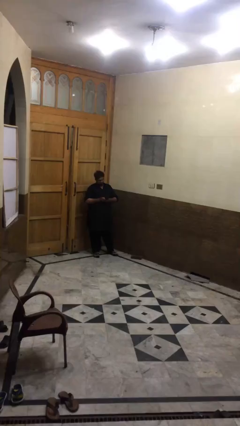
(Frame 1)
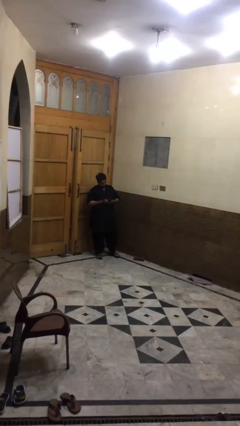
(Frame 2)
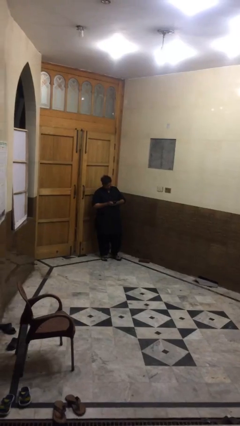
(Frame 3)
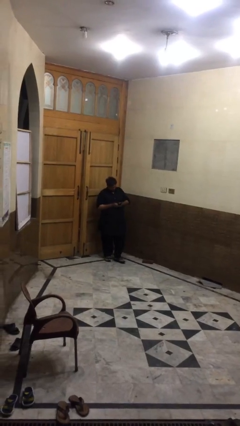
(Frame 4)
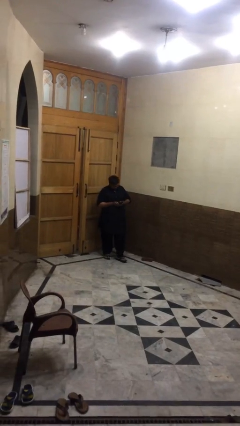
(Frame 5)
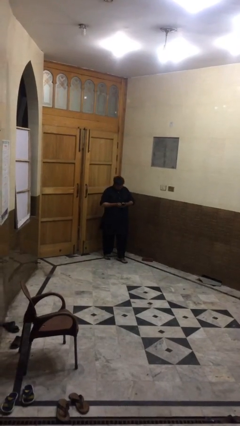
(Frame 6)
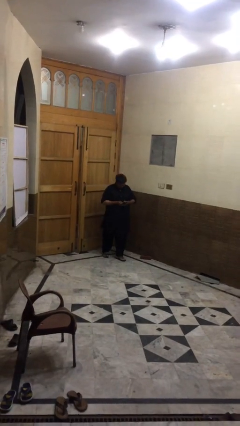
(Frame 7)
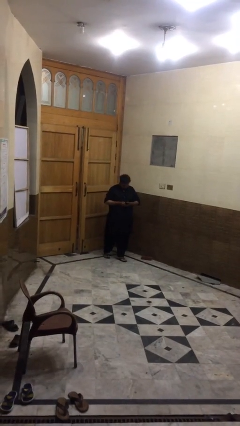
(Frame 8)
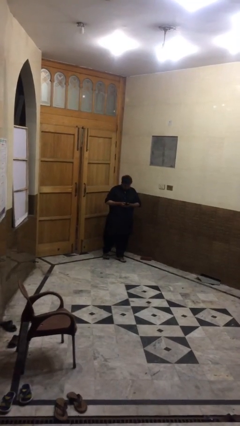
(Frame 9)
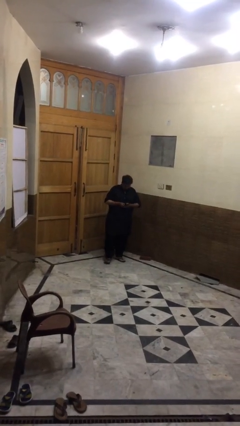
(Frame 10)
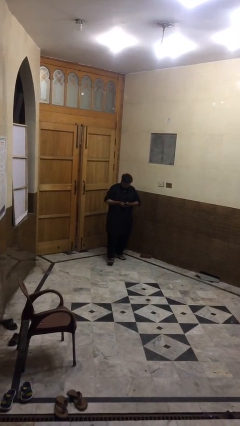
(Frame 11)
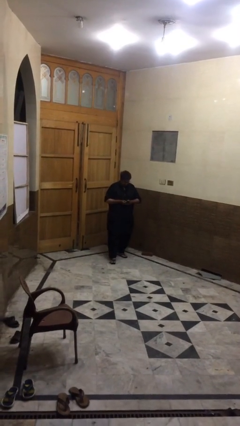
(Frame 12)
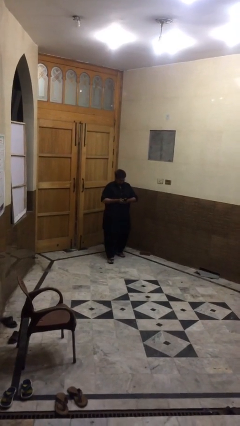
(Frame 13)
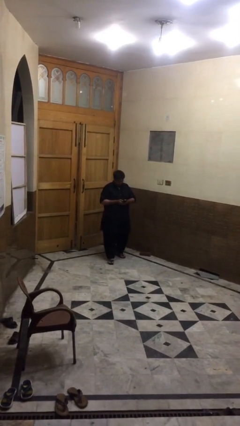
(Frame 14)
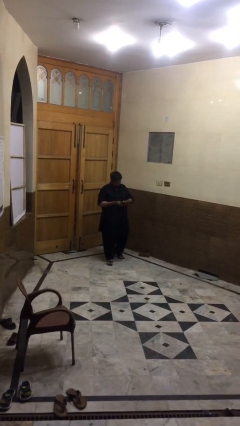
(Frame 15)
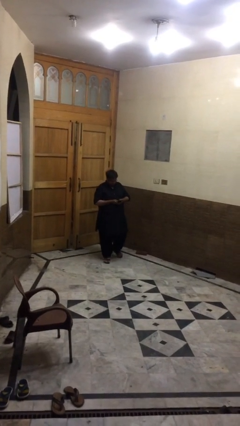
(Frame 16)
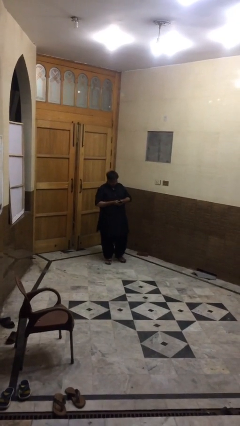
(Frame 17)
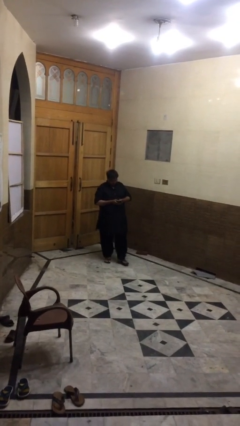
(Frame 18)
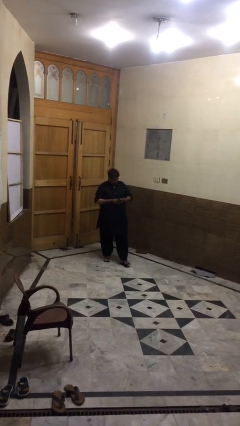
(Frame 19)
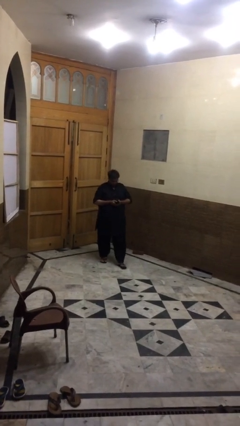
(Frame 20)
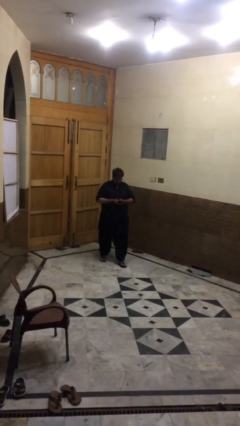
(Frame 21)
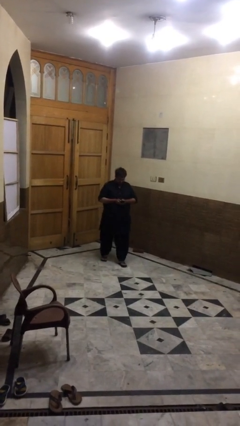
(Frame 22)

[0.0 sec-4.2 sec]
person texts on phone

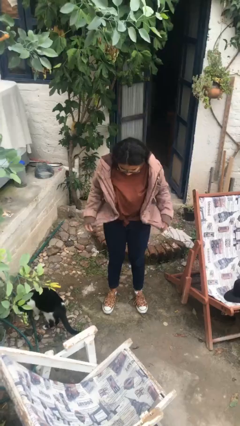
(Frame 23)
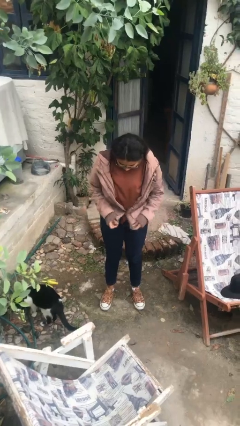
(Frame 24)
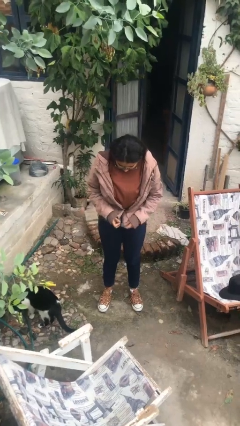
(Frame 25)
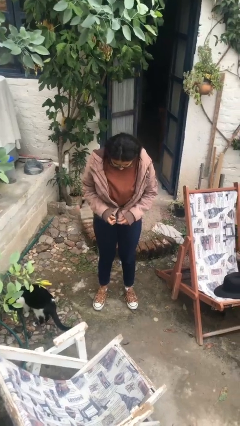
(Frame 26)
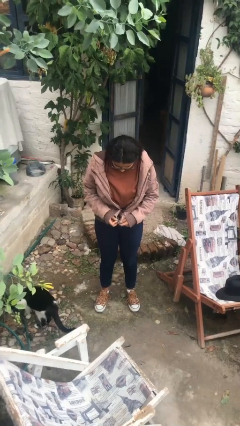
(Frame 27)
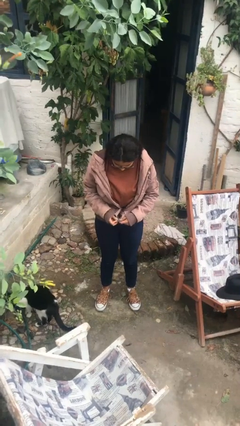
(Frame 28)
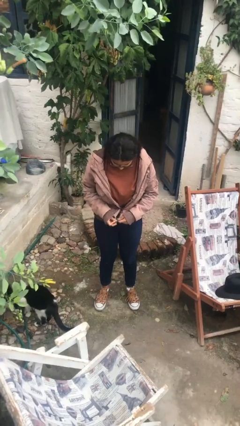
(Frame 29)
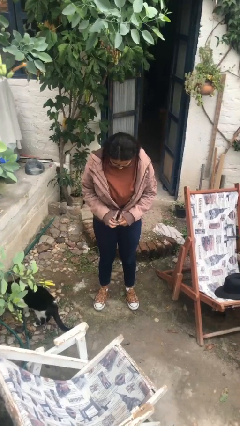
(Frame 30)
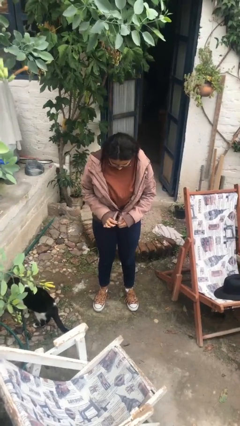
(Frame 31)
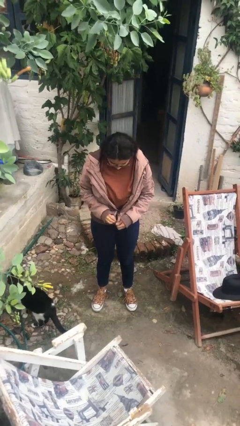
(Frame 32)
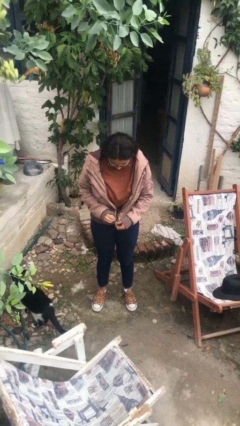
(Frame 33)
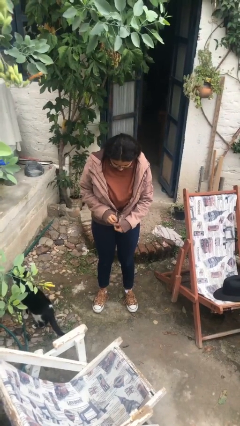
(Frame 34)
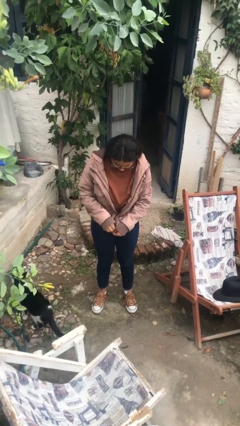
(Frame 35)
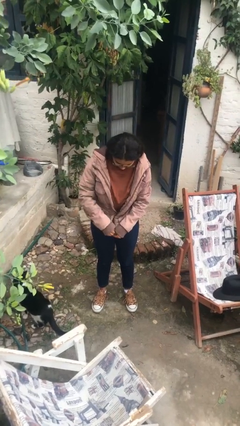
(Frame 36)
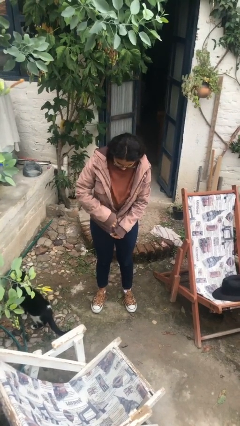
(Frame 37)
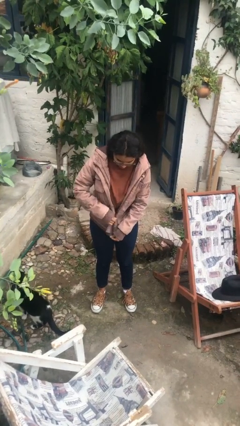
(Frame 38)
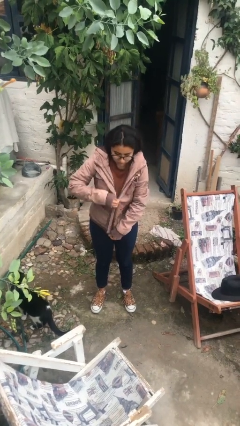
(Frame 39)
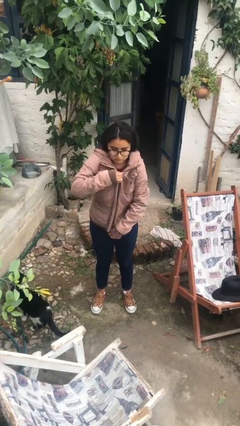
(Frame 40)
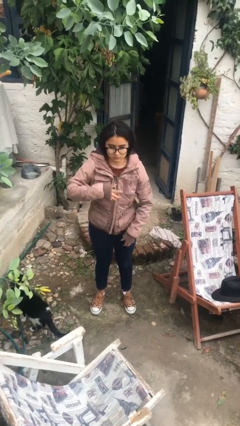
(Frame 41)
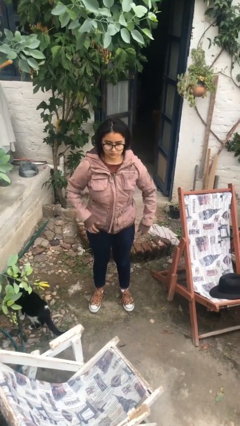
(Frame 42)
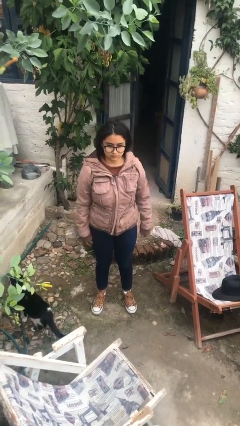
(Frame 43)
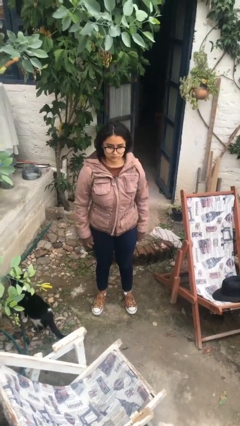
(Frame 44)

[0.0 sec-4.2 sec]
person zips up jacket

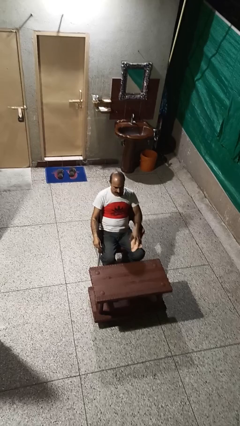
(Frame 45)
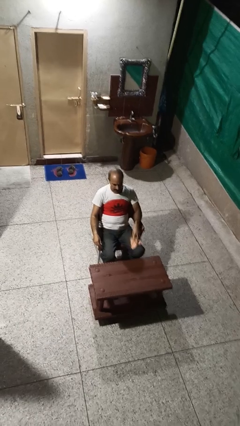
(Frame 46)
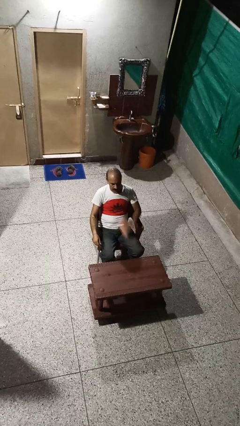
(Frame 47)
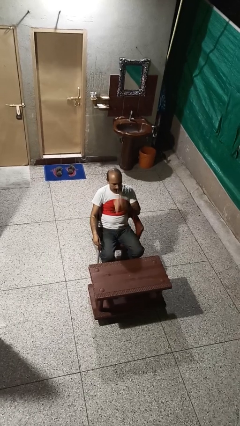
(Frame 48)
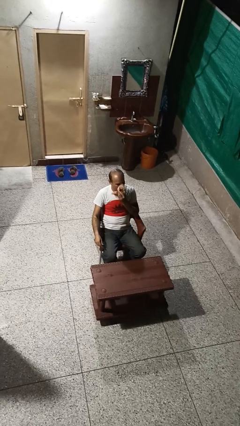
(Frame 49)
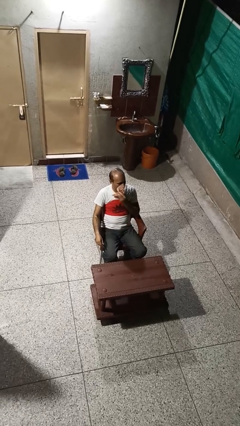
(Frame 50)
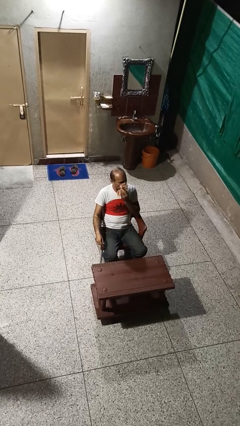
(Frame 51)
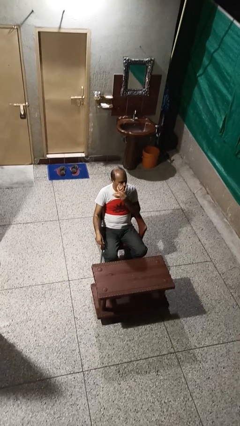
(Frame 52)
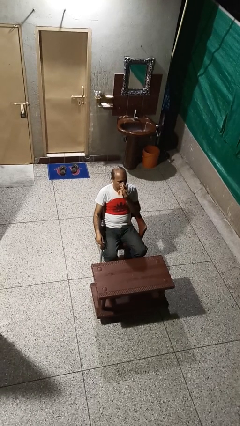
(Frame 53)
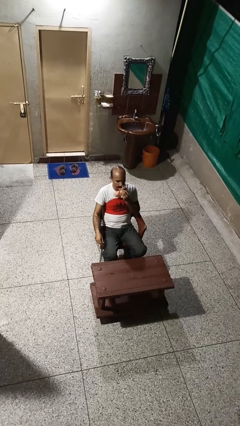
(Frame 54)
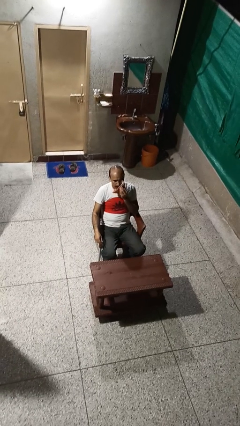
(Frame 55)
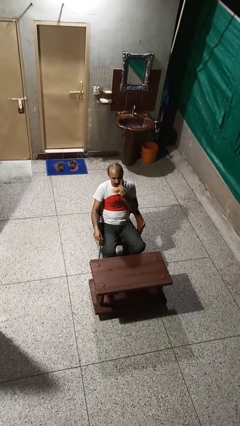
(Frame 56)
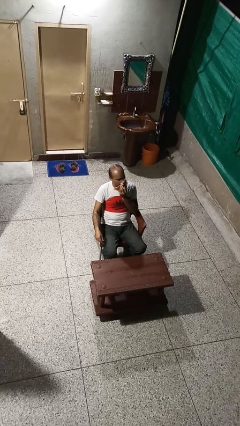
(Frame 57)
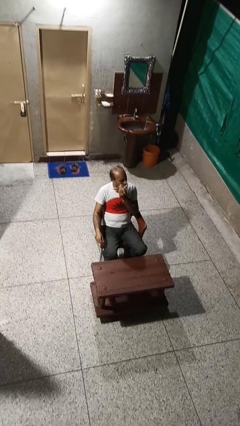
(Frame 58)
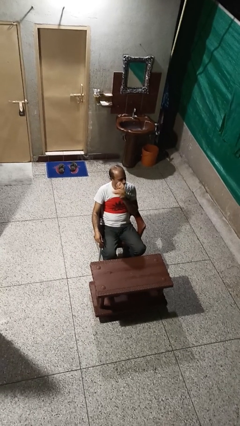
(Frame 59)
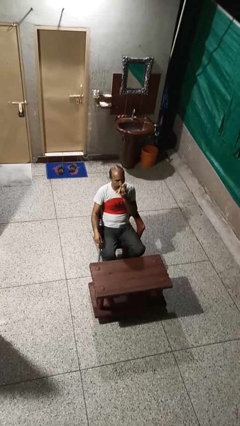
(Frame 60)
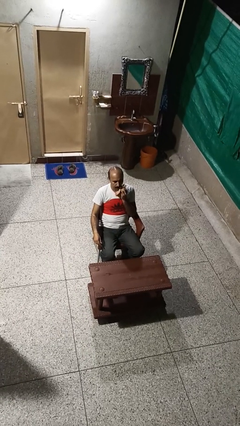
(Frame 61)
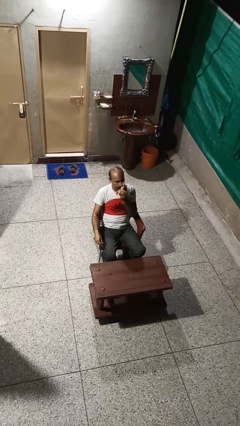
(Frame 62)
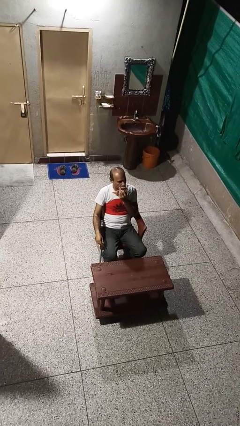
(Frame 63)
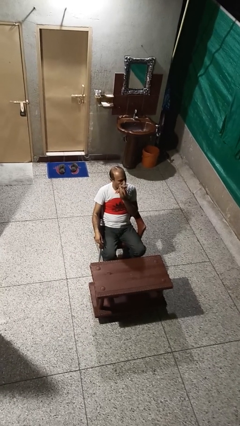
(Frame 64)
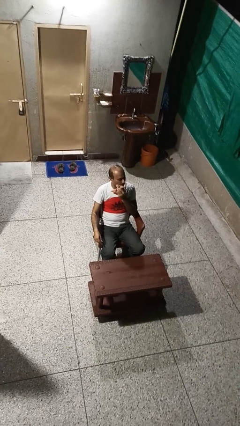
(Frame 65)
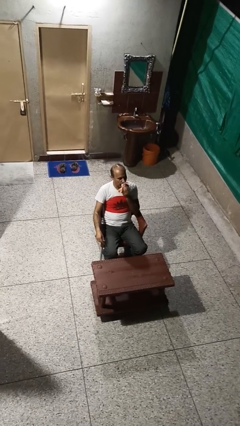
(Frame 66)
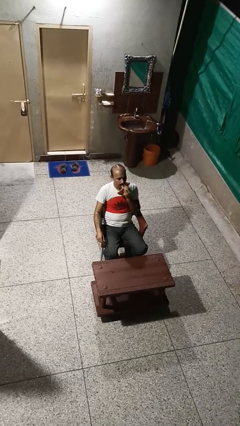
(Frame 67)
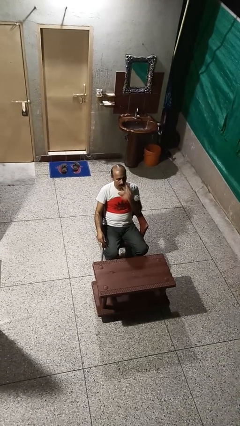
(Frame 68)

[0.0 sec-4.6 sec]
person wipes mouth with napkin

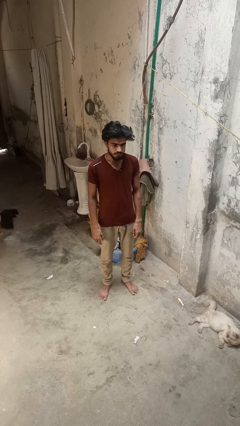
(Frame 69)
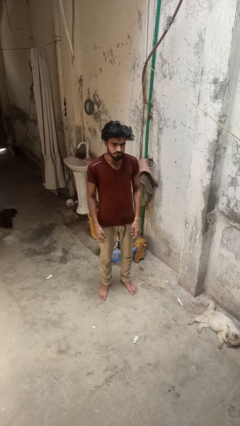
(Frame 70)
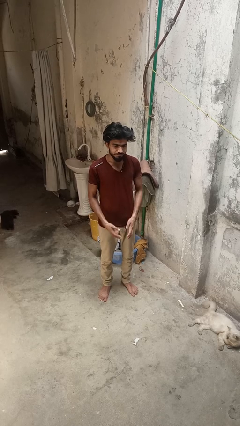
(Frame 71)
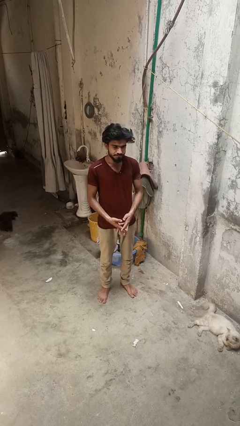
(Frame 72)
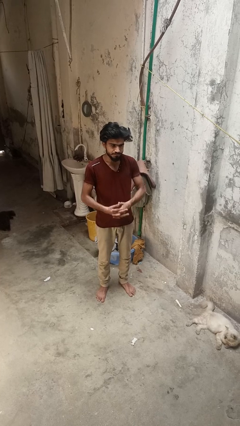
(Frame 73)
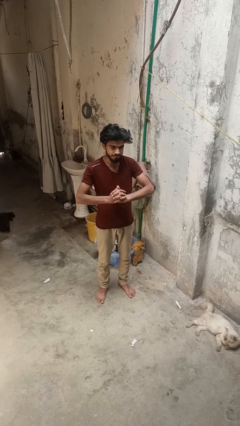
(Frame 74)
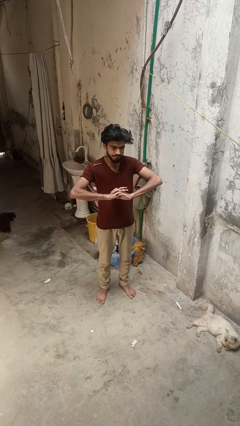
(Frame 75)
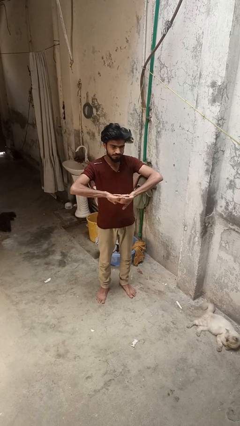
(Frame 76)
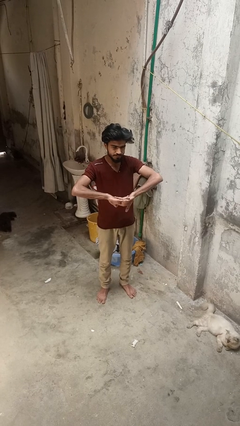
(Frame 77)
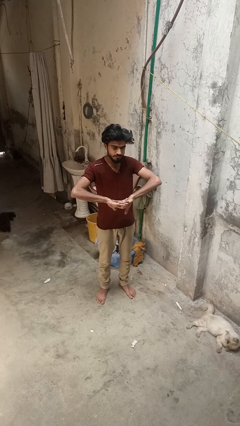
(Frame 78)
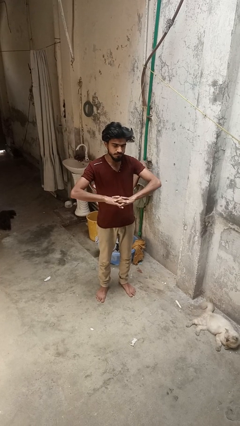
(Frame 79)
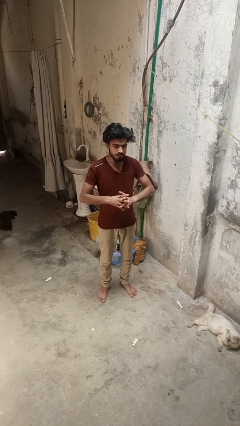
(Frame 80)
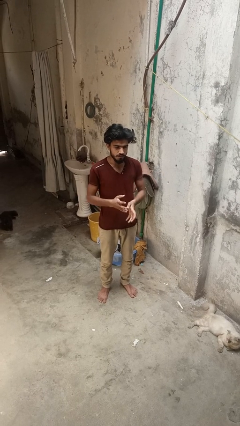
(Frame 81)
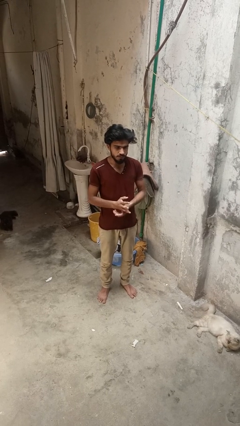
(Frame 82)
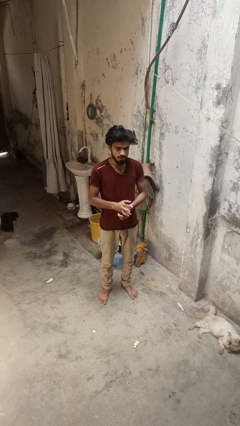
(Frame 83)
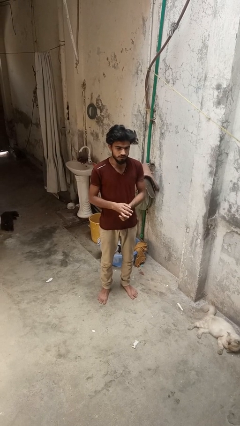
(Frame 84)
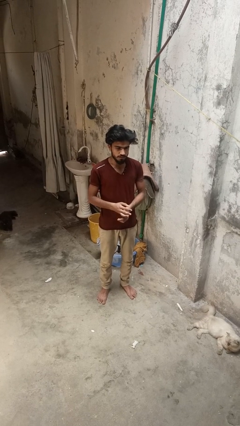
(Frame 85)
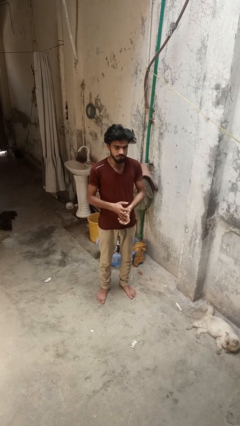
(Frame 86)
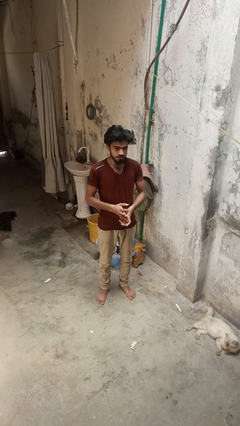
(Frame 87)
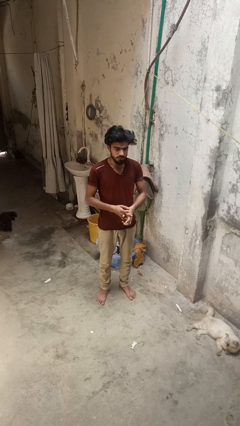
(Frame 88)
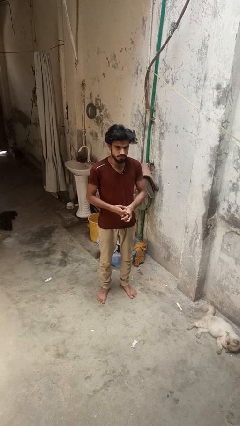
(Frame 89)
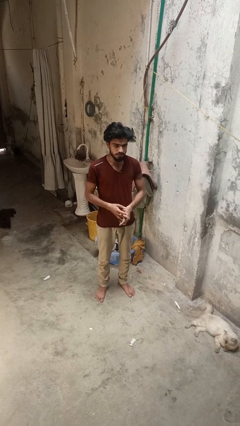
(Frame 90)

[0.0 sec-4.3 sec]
person cracks knuckles

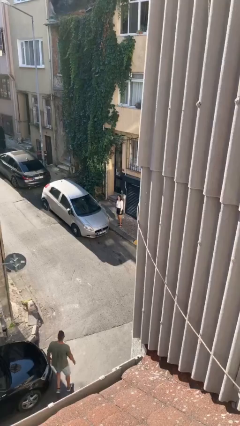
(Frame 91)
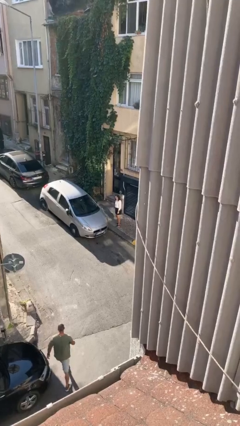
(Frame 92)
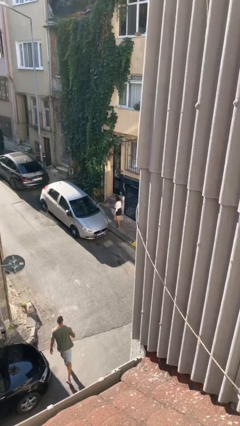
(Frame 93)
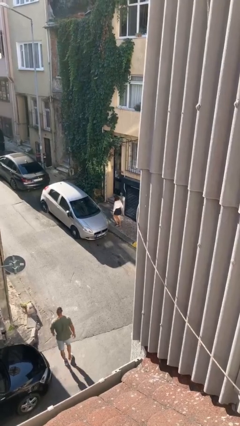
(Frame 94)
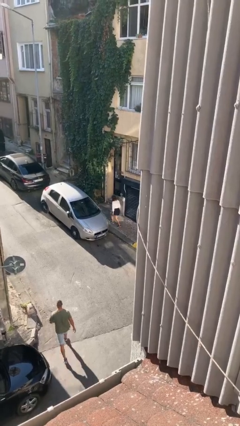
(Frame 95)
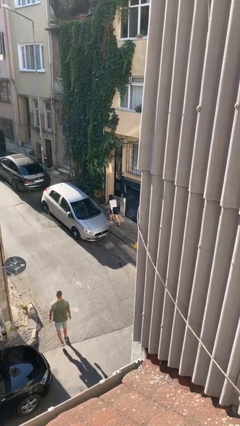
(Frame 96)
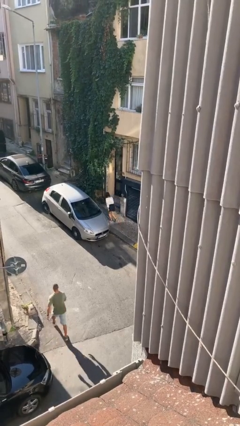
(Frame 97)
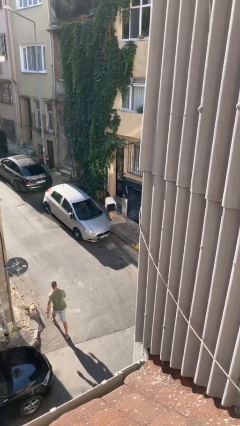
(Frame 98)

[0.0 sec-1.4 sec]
person walks around car
